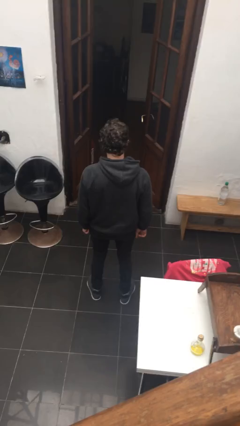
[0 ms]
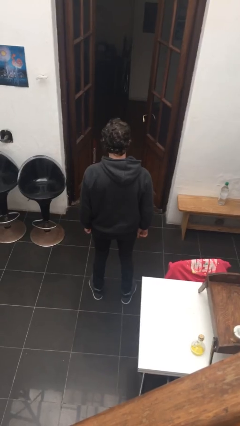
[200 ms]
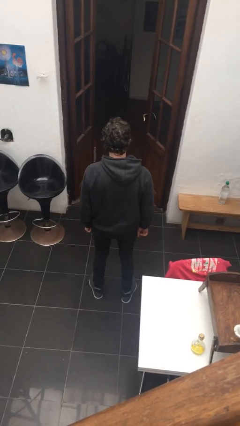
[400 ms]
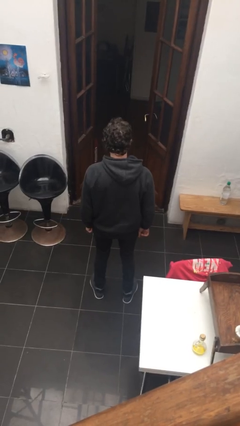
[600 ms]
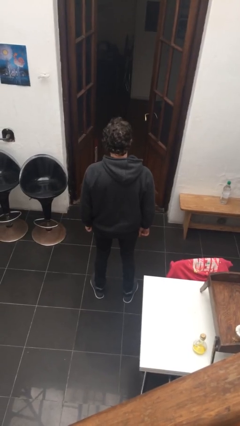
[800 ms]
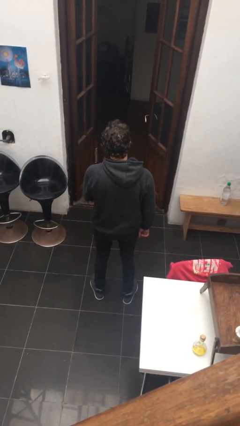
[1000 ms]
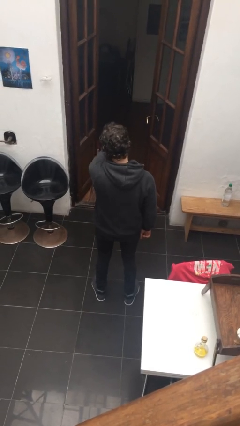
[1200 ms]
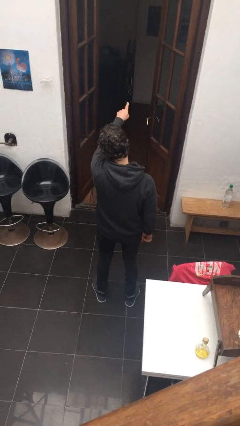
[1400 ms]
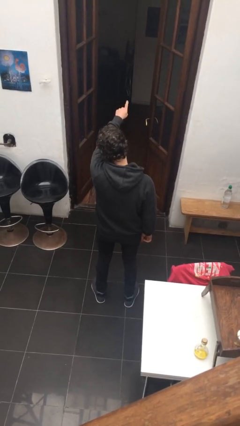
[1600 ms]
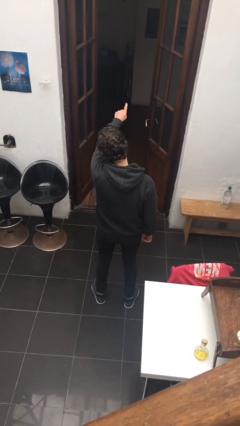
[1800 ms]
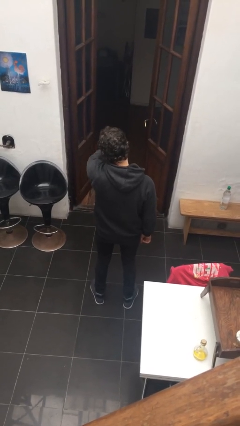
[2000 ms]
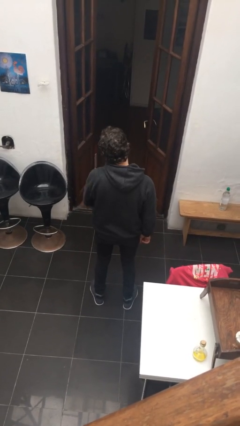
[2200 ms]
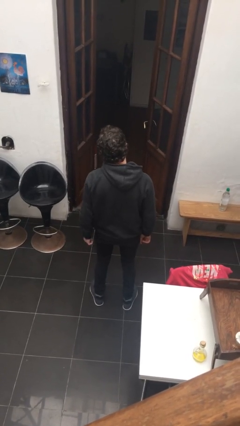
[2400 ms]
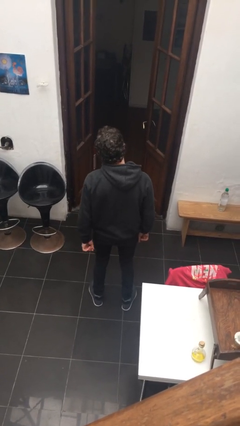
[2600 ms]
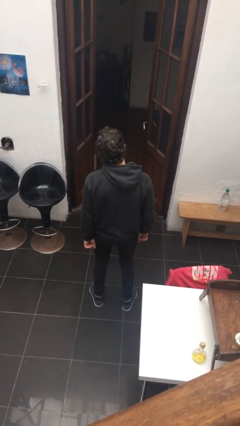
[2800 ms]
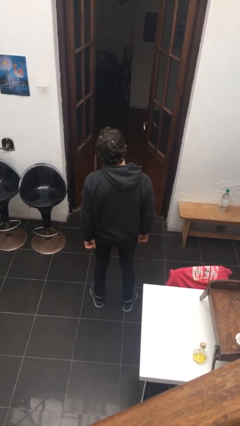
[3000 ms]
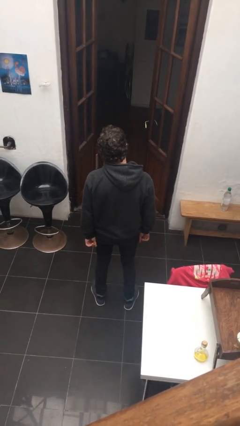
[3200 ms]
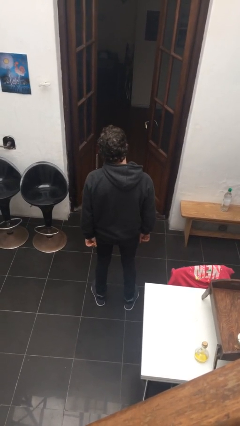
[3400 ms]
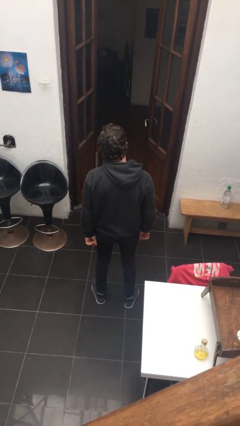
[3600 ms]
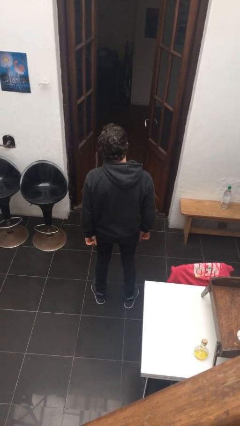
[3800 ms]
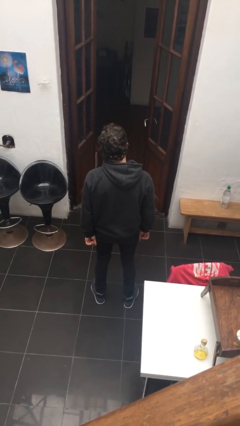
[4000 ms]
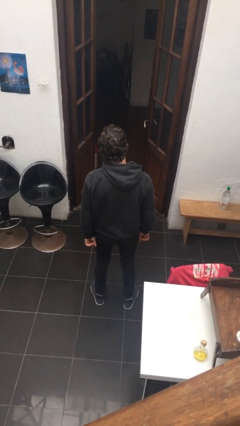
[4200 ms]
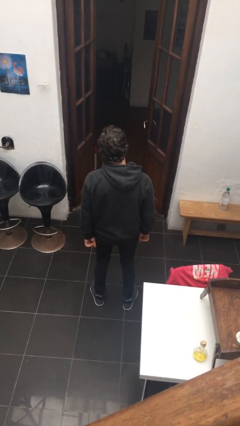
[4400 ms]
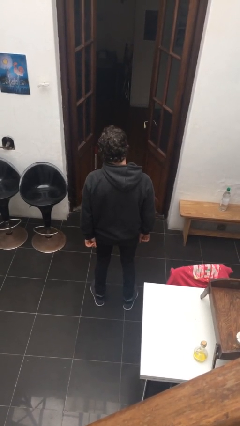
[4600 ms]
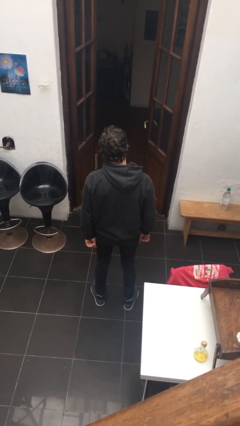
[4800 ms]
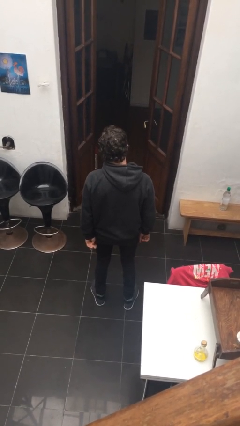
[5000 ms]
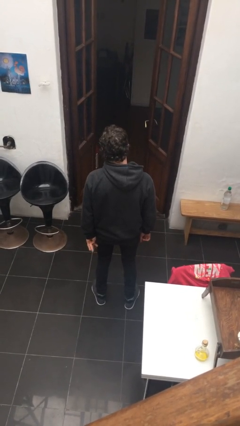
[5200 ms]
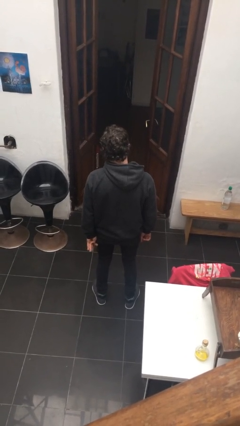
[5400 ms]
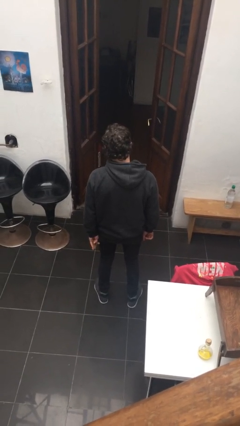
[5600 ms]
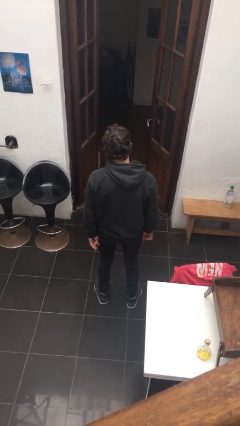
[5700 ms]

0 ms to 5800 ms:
person points at person

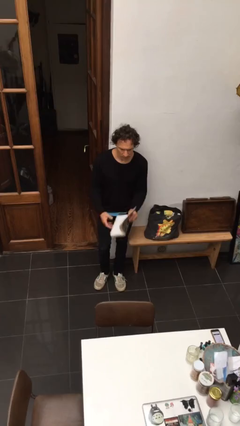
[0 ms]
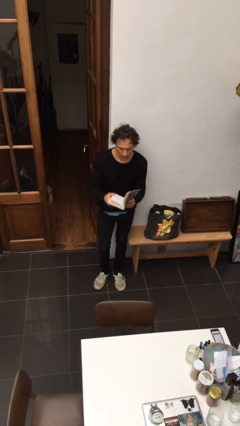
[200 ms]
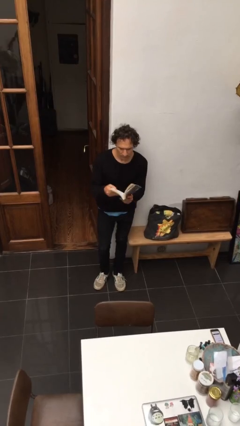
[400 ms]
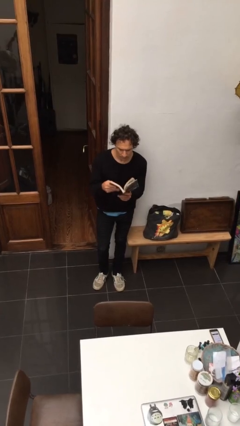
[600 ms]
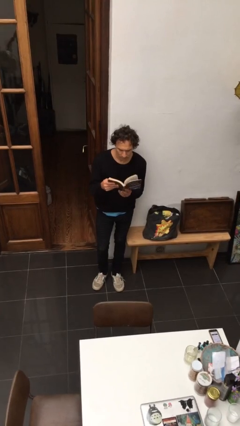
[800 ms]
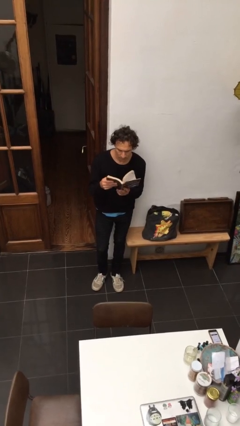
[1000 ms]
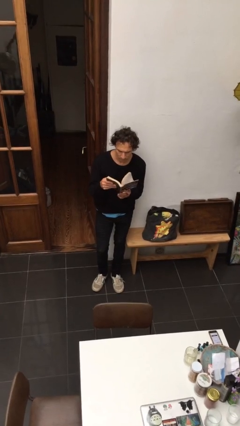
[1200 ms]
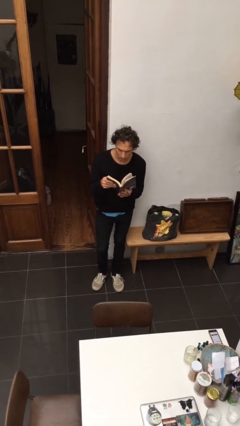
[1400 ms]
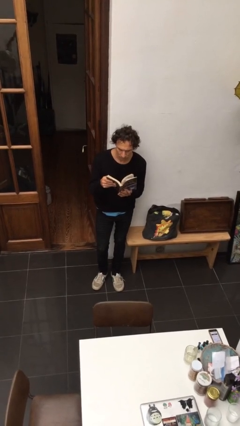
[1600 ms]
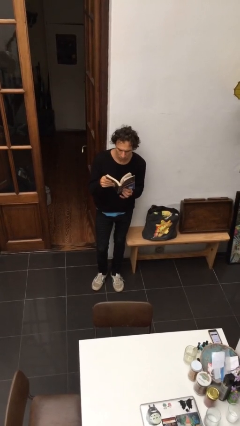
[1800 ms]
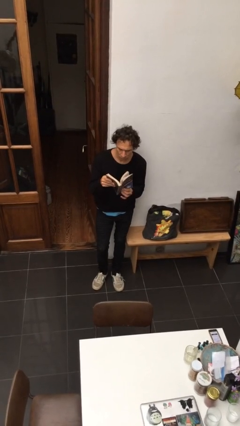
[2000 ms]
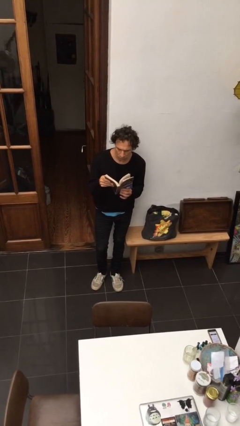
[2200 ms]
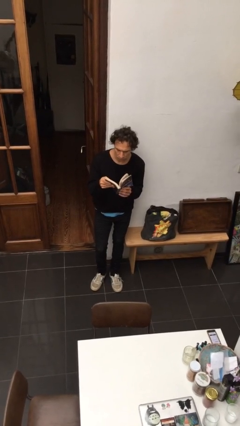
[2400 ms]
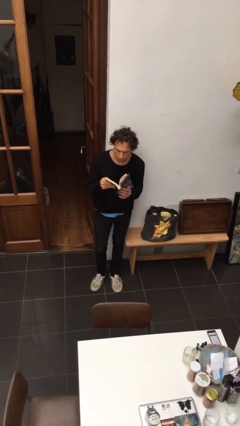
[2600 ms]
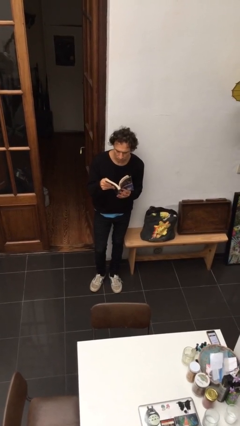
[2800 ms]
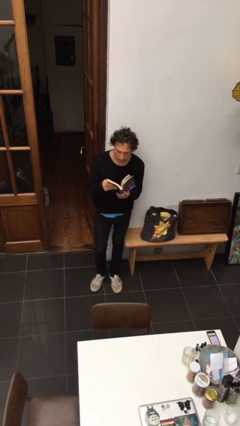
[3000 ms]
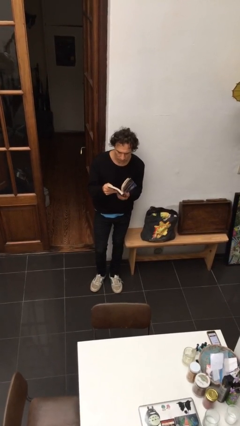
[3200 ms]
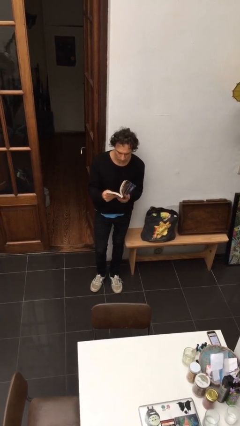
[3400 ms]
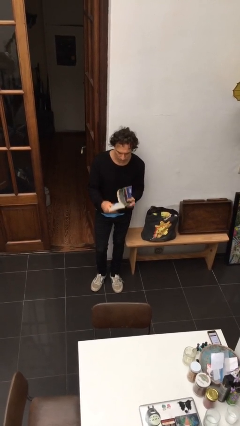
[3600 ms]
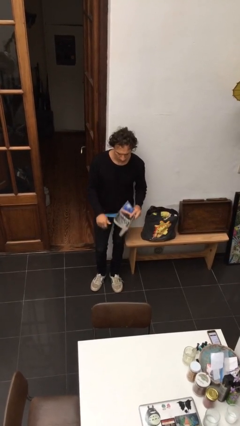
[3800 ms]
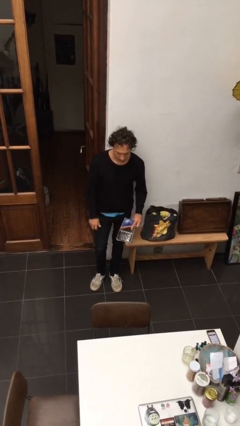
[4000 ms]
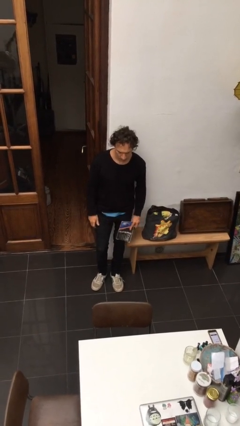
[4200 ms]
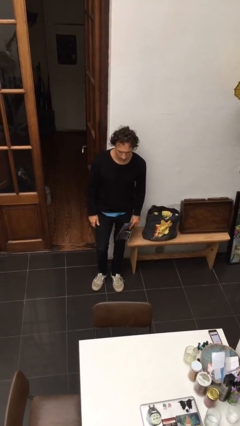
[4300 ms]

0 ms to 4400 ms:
person reads document

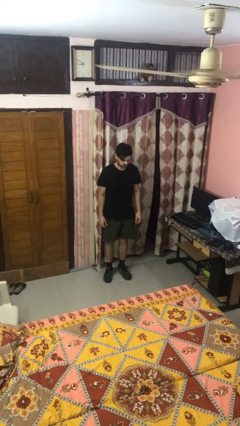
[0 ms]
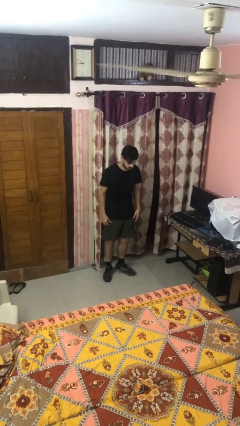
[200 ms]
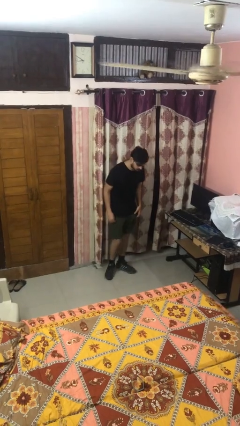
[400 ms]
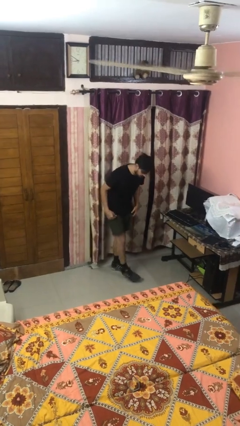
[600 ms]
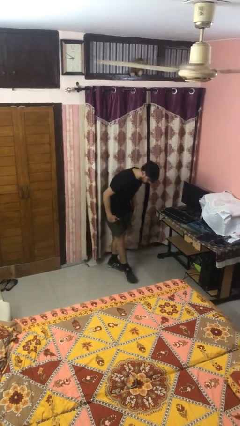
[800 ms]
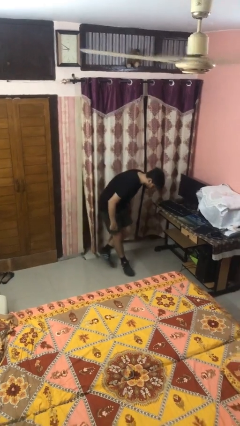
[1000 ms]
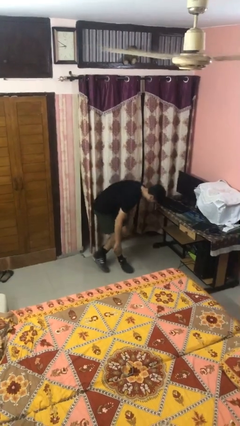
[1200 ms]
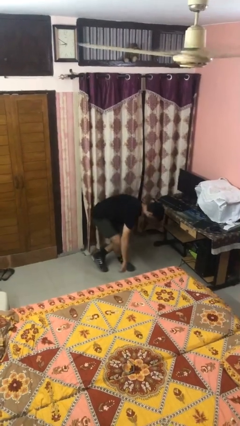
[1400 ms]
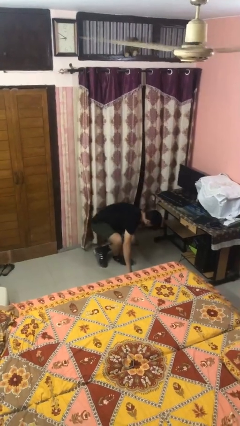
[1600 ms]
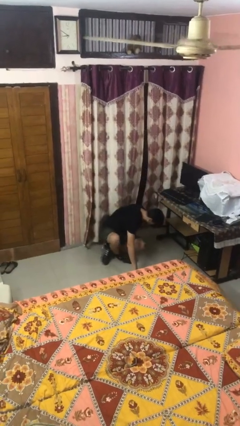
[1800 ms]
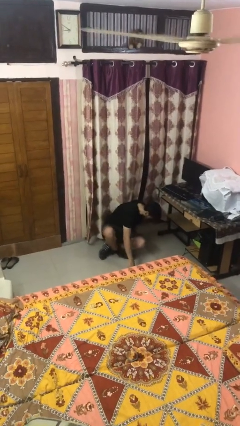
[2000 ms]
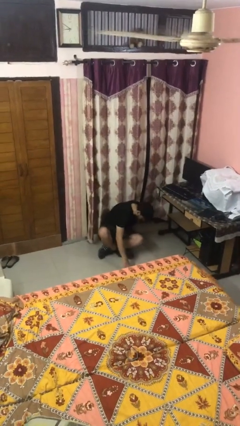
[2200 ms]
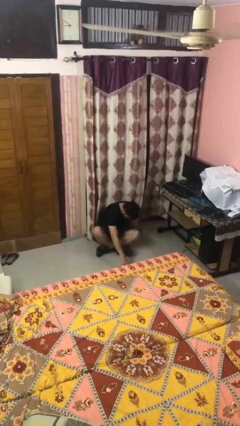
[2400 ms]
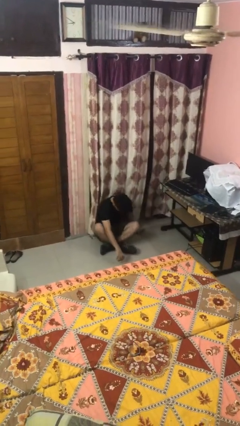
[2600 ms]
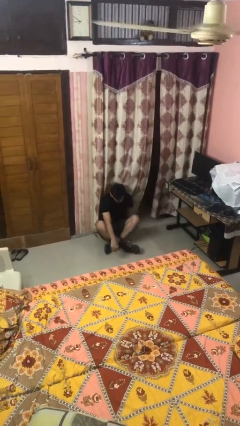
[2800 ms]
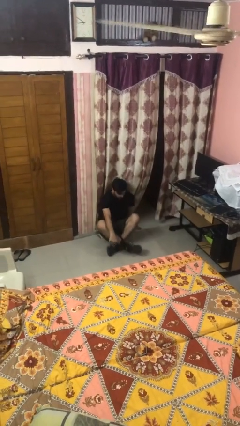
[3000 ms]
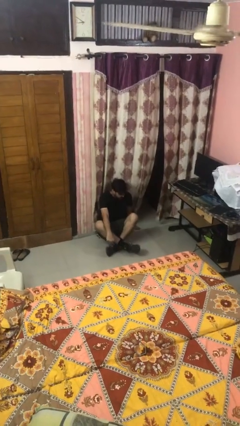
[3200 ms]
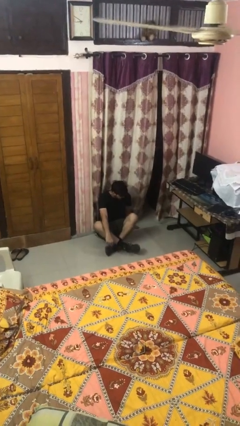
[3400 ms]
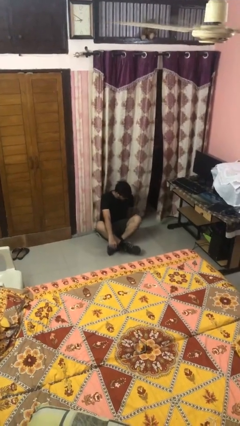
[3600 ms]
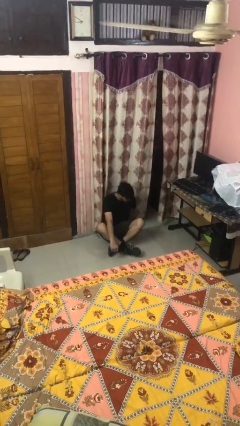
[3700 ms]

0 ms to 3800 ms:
person sits crisscross

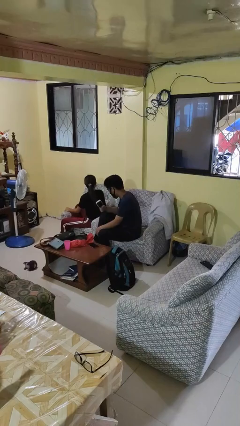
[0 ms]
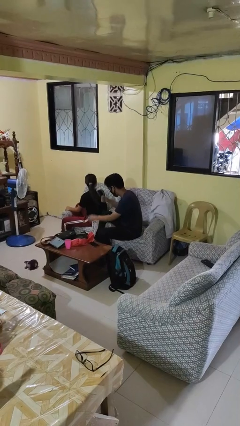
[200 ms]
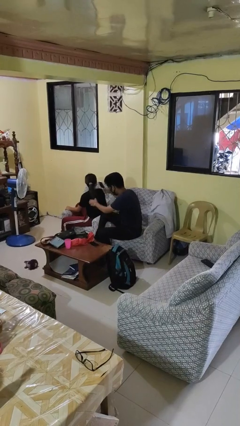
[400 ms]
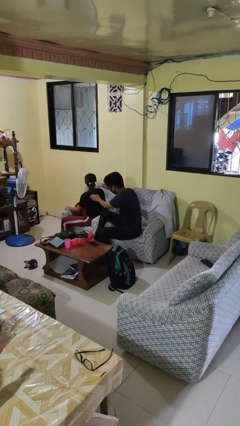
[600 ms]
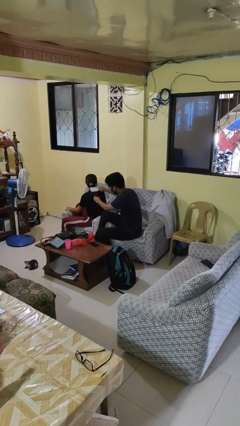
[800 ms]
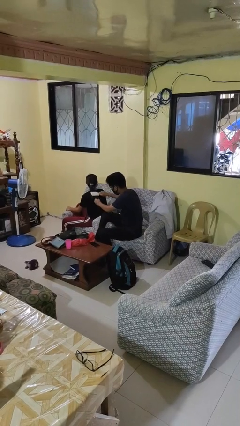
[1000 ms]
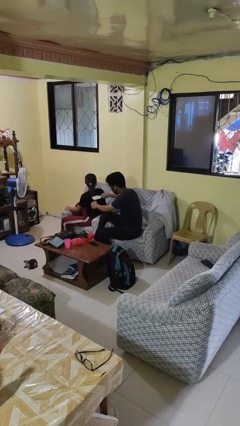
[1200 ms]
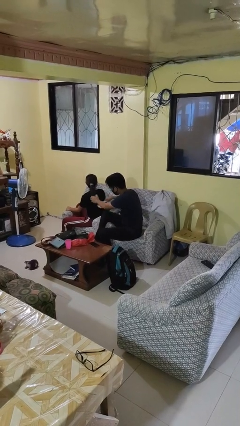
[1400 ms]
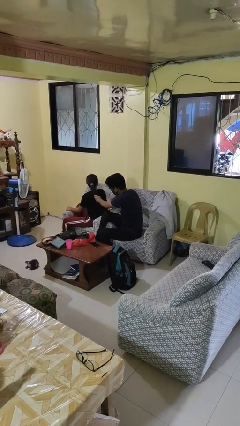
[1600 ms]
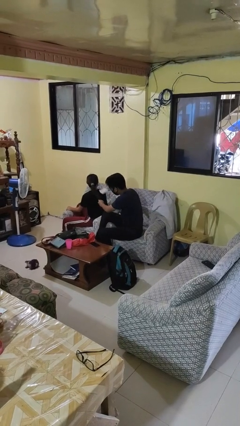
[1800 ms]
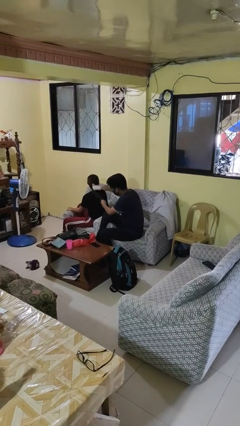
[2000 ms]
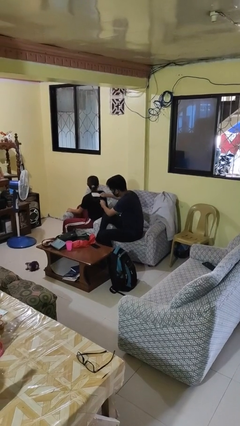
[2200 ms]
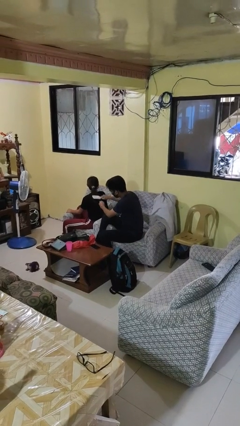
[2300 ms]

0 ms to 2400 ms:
person brushes hair of person

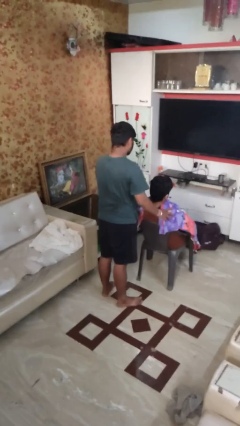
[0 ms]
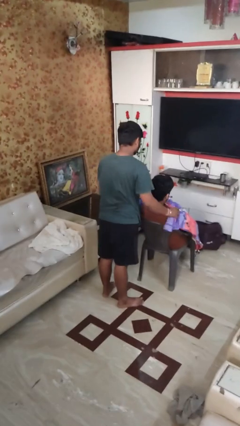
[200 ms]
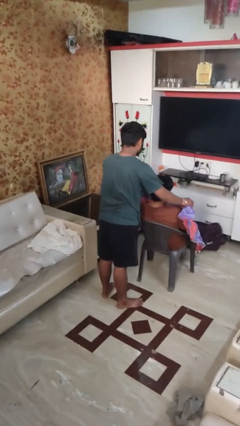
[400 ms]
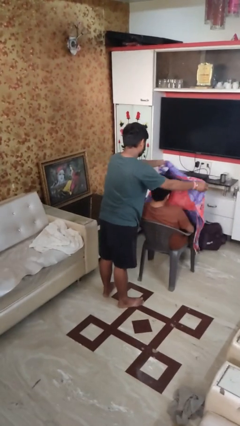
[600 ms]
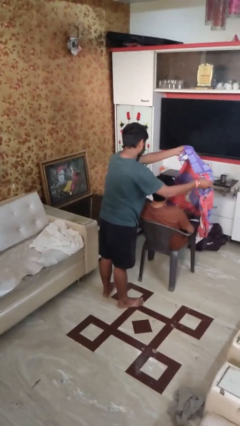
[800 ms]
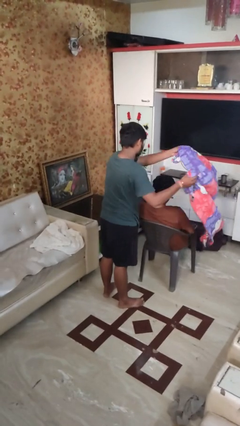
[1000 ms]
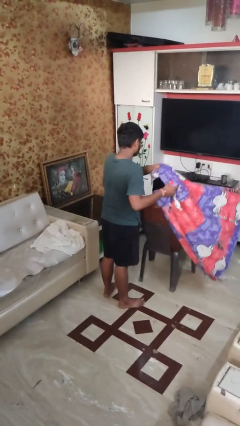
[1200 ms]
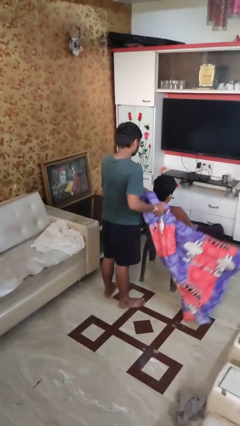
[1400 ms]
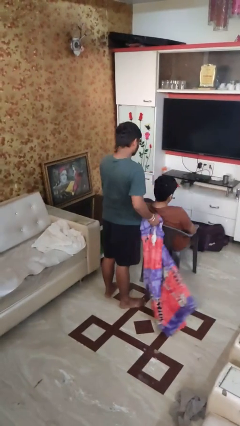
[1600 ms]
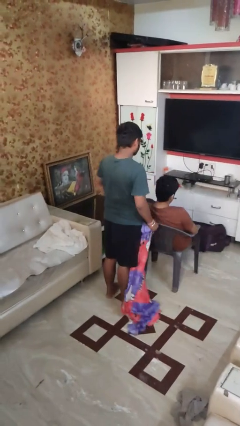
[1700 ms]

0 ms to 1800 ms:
person uncovers friend with blanket
